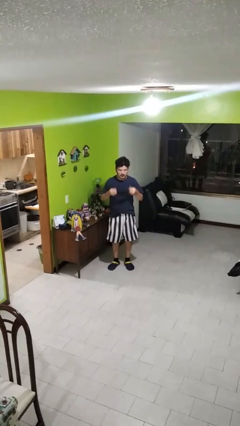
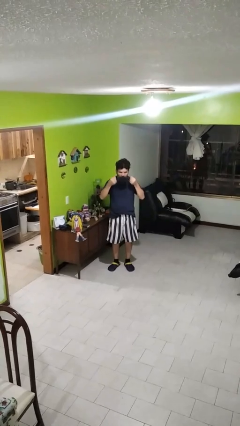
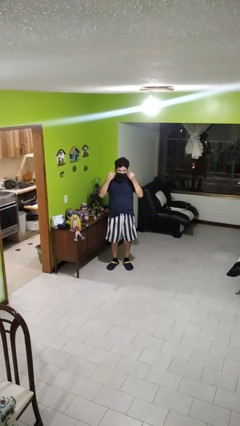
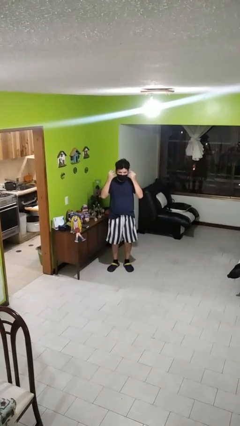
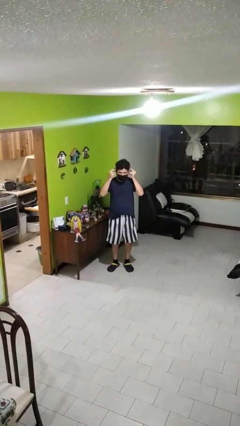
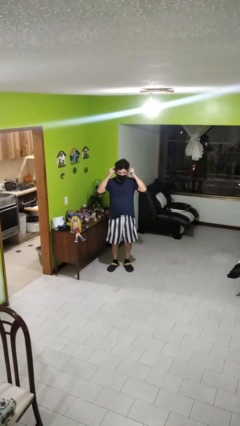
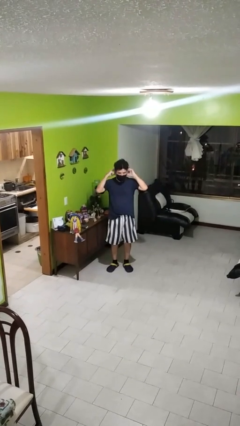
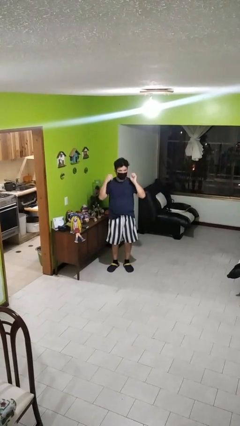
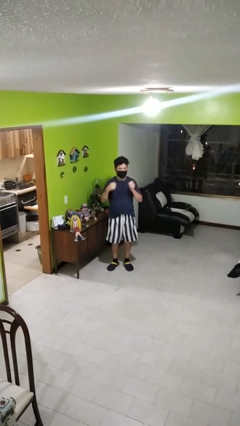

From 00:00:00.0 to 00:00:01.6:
person puts on facemask

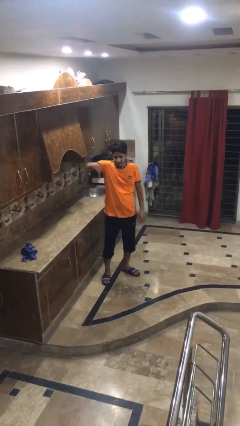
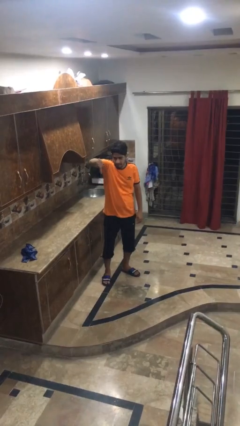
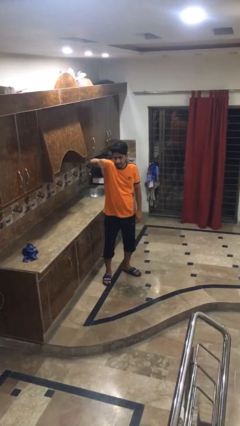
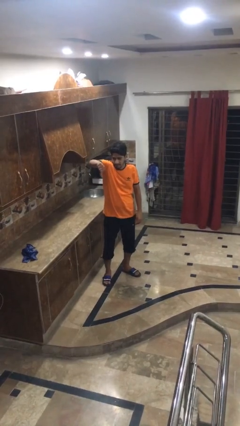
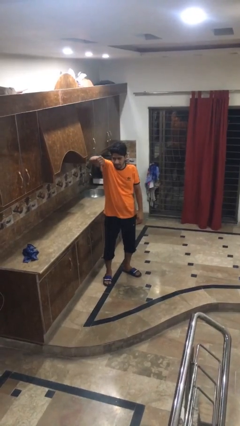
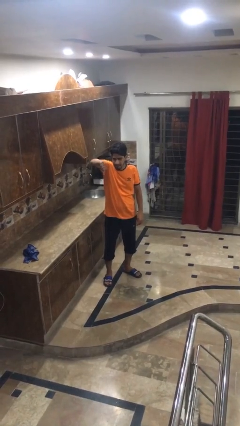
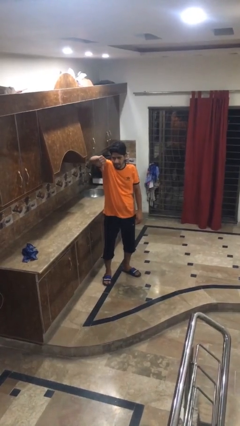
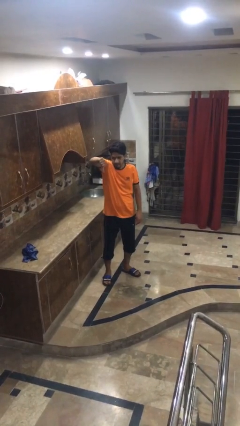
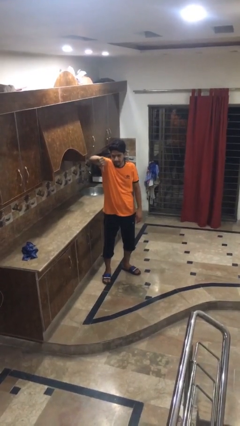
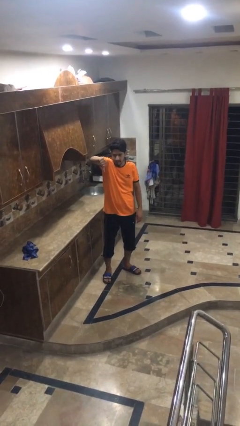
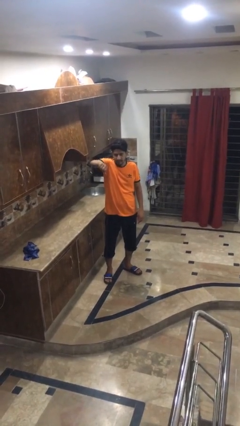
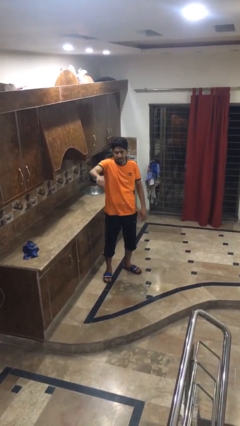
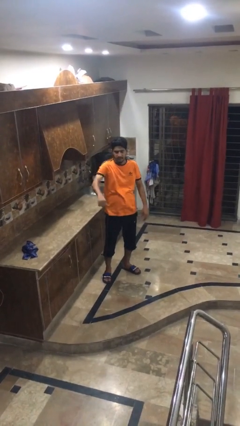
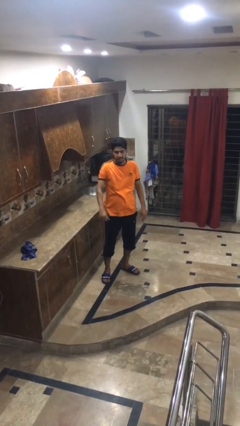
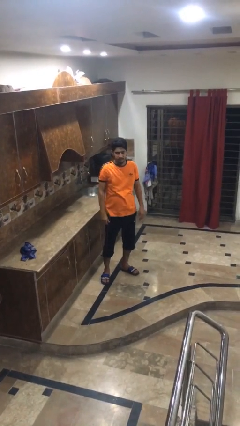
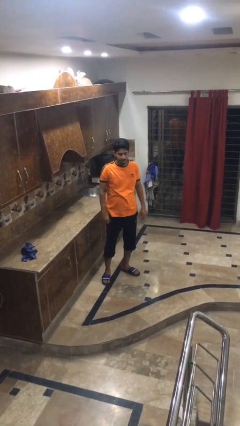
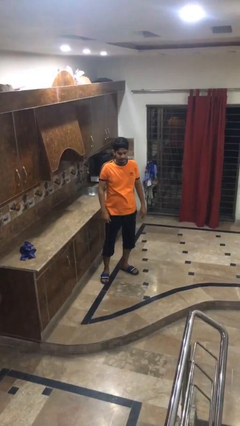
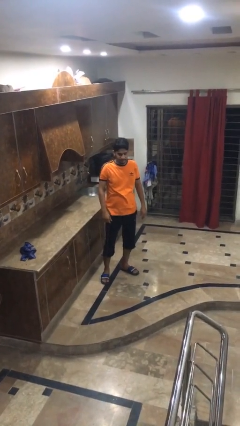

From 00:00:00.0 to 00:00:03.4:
person gestures thumbs down

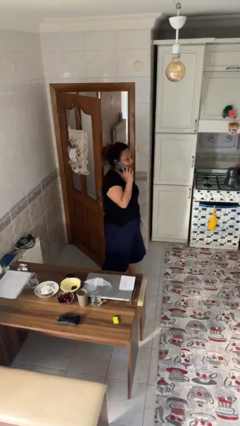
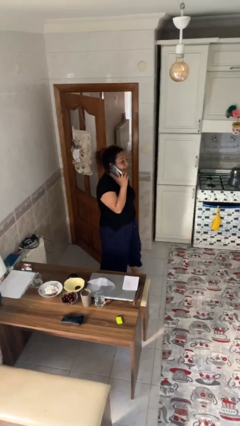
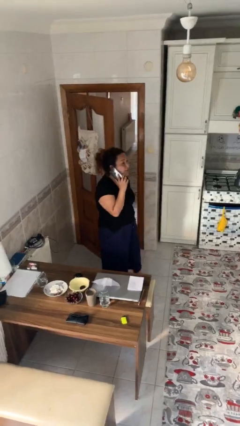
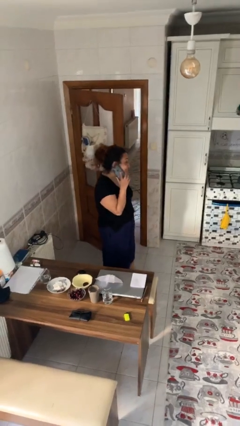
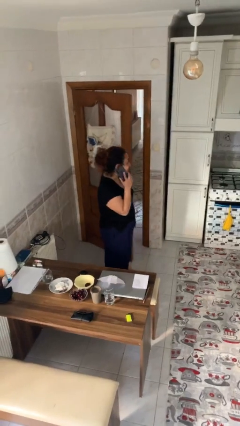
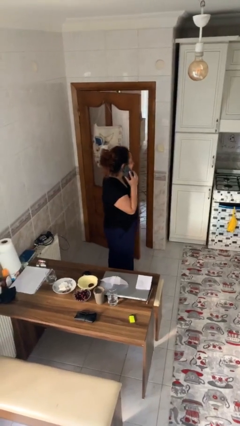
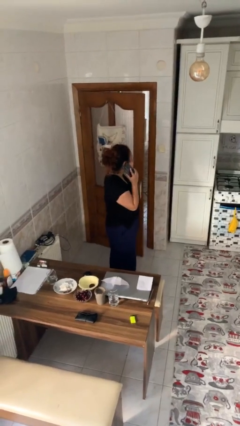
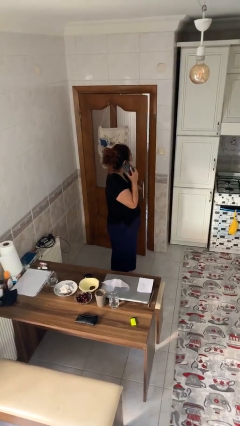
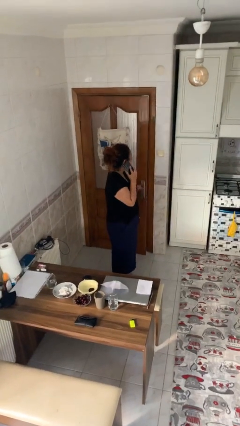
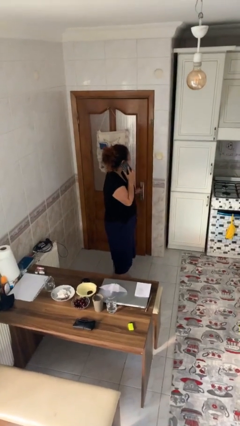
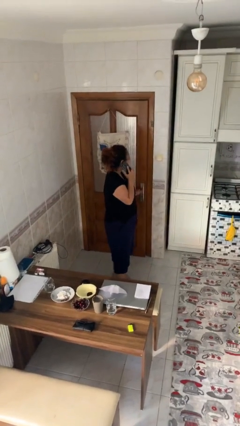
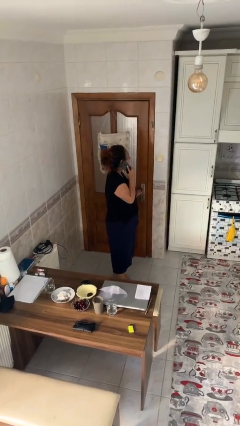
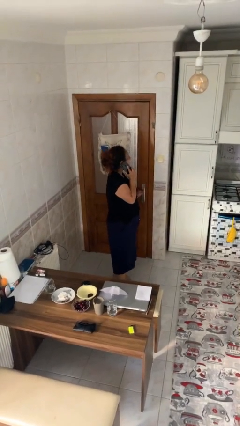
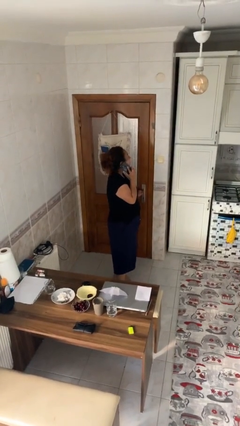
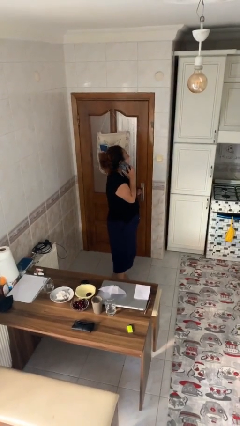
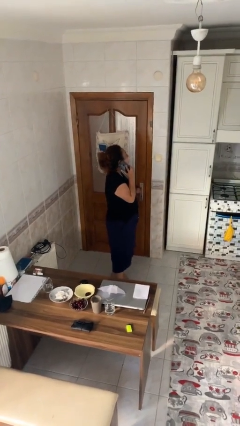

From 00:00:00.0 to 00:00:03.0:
person closes facility door

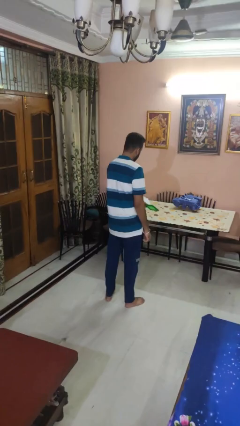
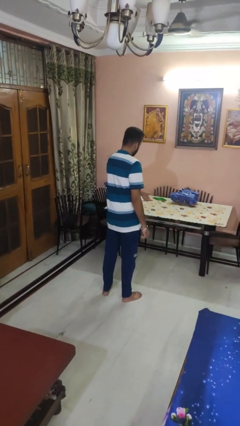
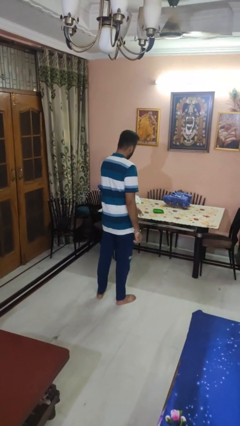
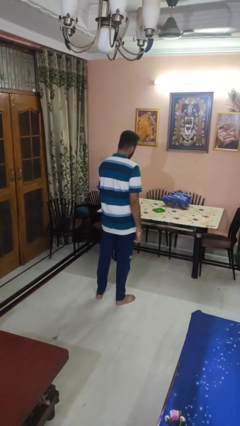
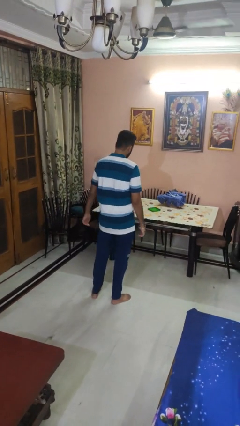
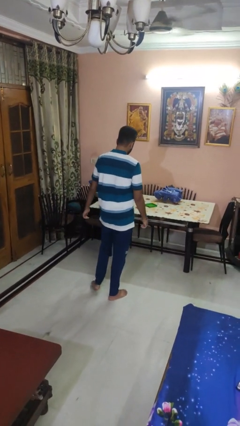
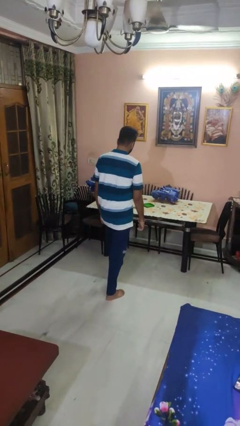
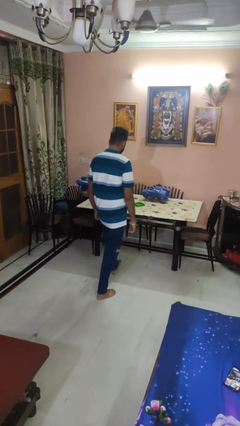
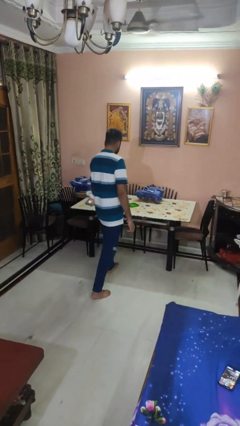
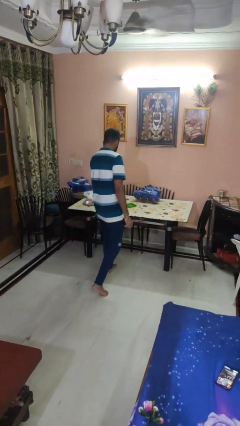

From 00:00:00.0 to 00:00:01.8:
person throws object on table

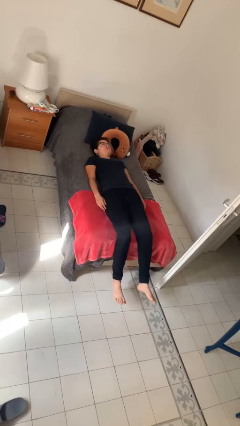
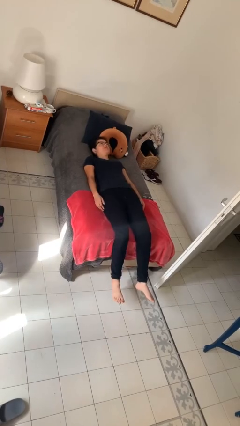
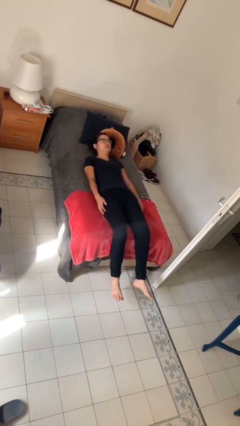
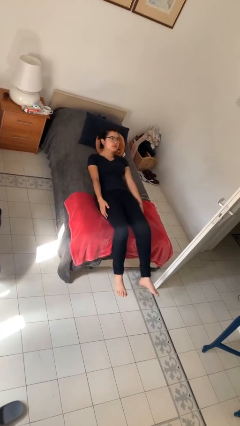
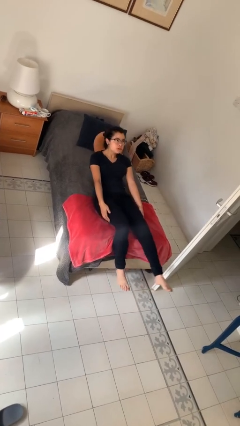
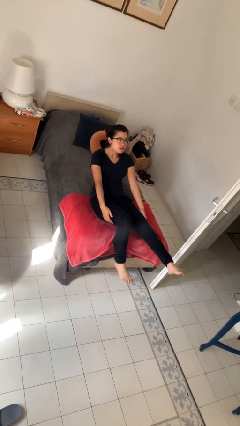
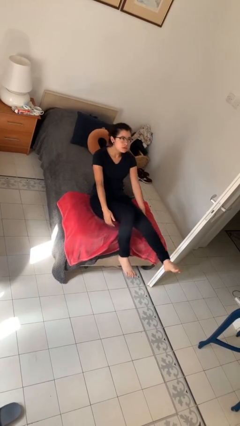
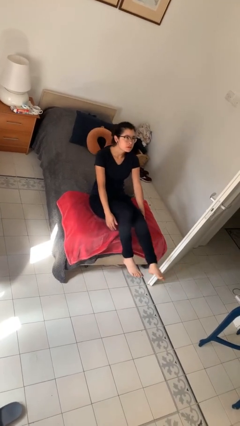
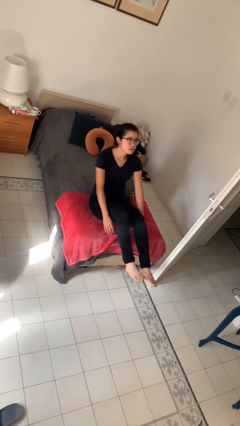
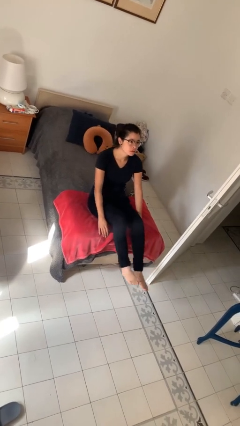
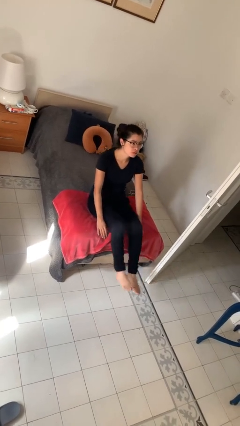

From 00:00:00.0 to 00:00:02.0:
person stands up

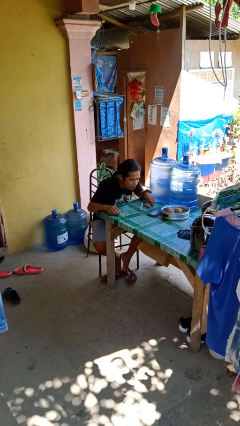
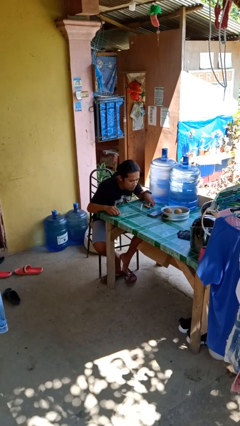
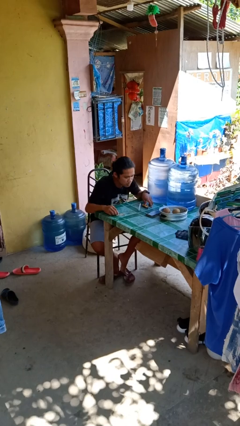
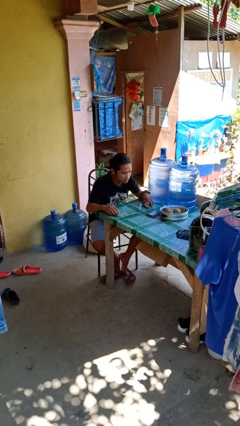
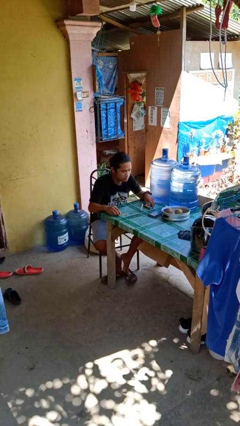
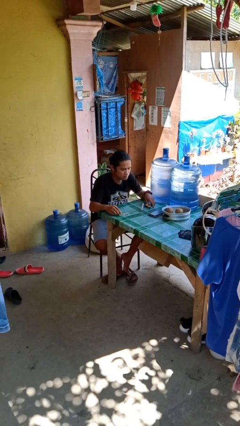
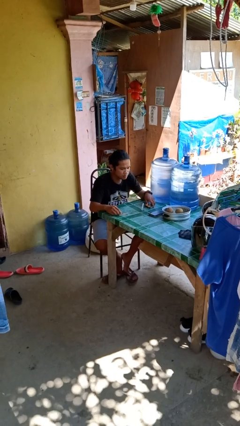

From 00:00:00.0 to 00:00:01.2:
person extinguishes candle

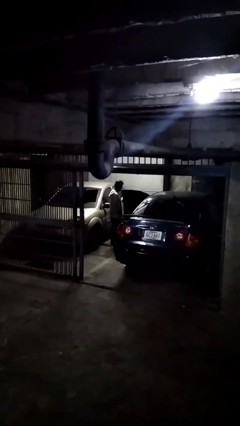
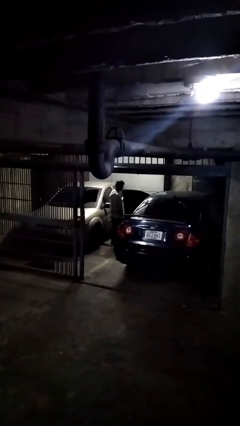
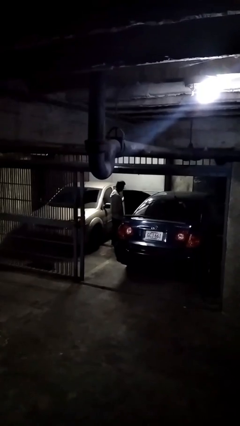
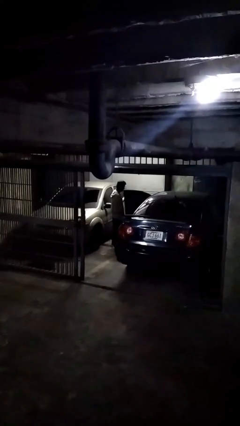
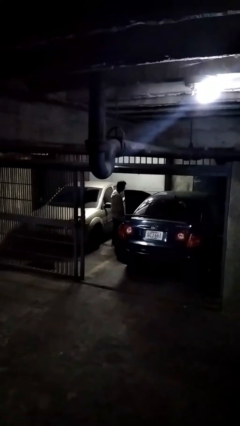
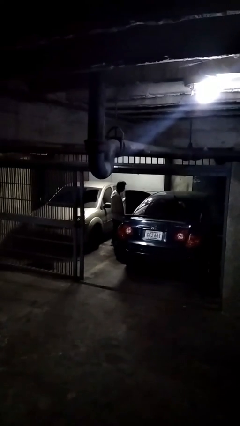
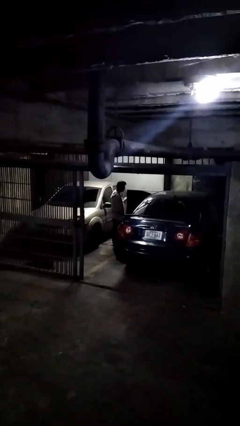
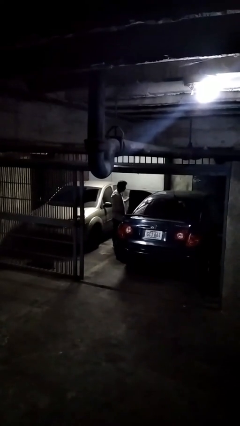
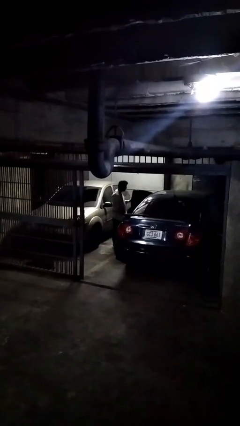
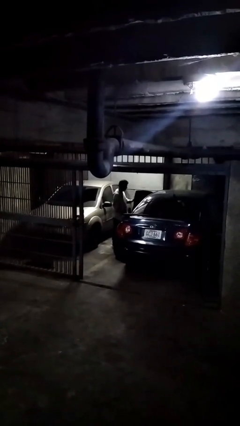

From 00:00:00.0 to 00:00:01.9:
person closes car door

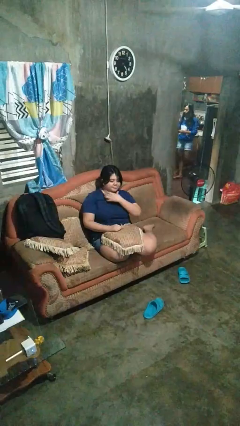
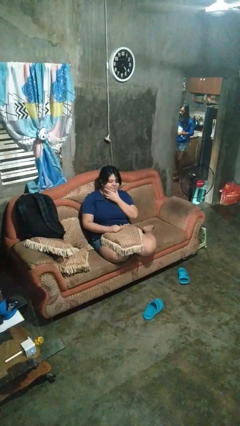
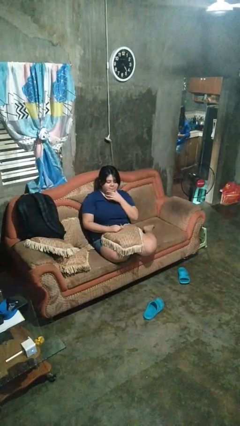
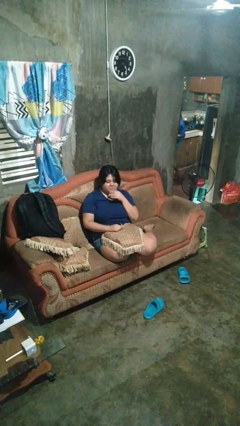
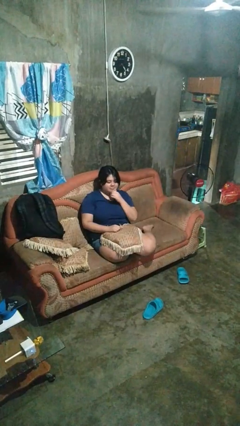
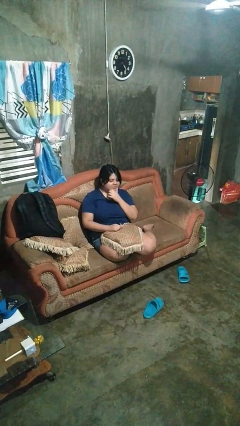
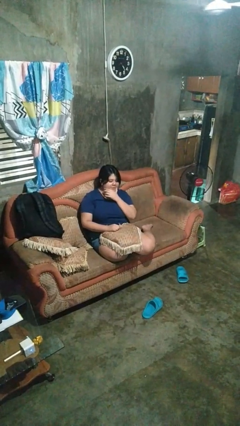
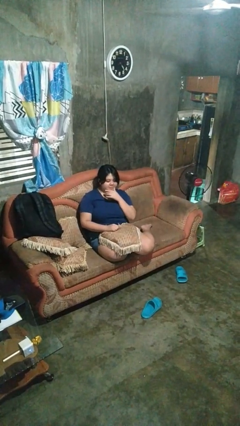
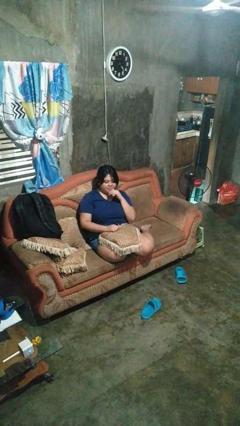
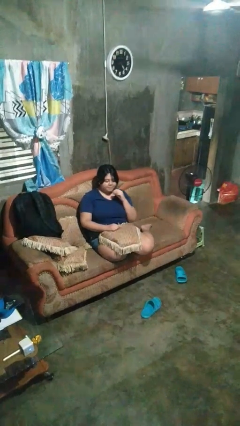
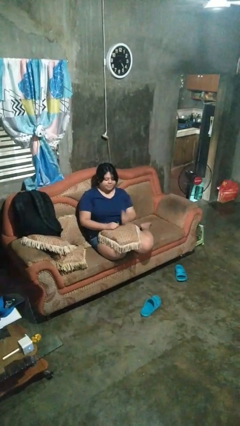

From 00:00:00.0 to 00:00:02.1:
person strokes chin
